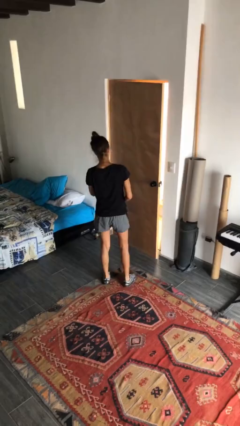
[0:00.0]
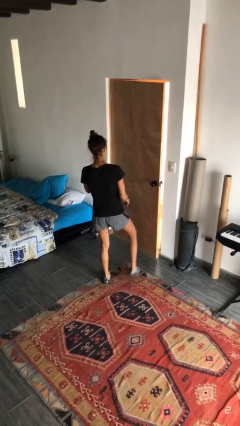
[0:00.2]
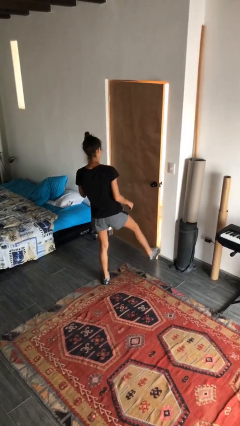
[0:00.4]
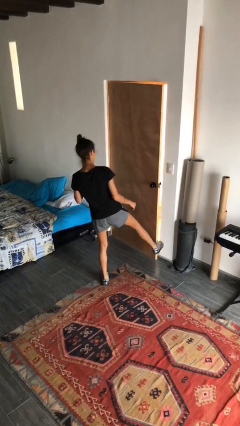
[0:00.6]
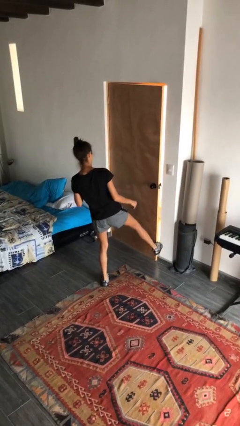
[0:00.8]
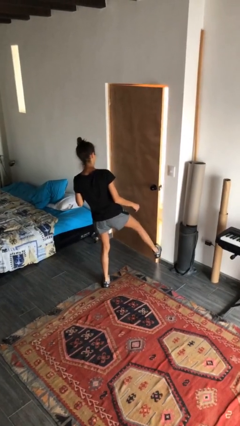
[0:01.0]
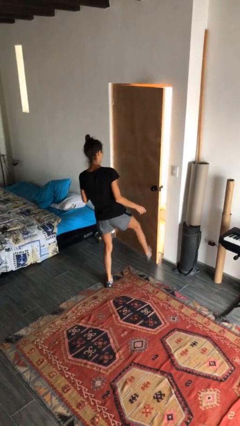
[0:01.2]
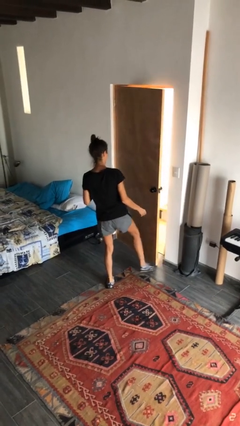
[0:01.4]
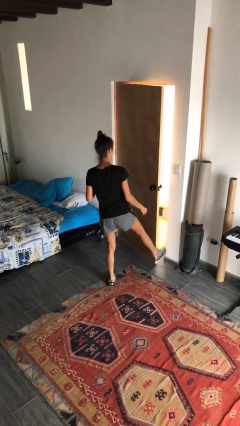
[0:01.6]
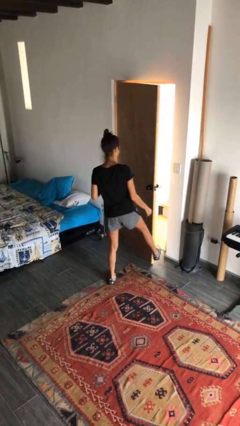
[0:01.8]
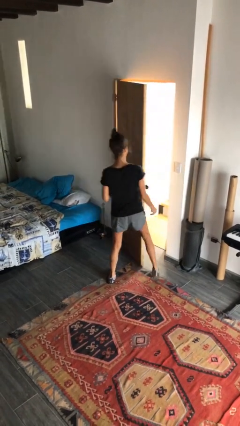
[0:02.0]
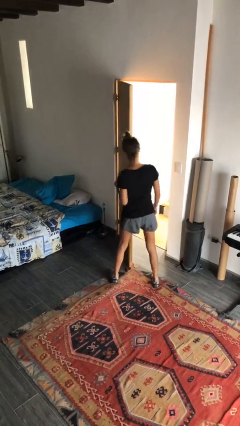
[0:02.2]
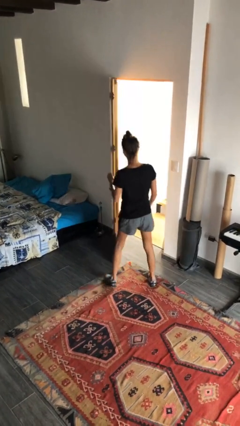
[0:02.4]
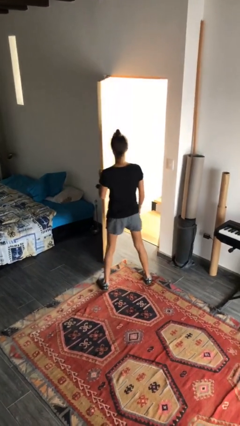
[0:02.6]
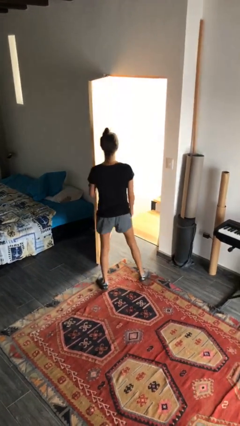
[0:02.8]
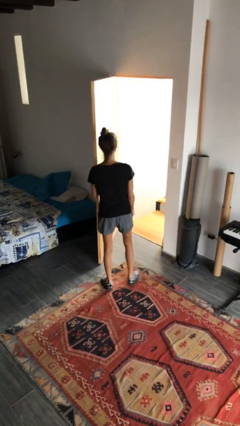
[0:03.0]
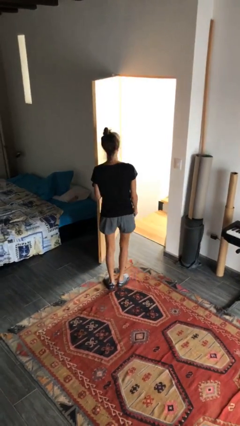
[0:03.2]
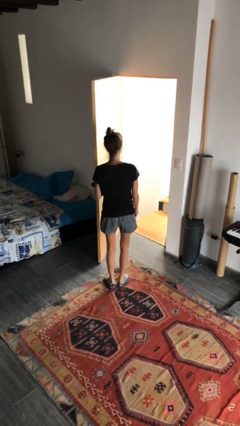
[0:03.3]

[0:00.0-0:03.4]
person opens facility door

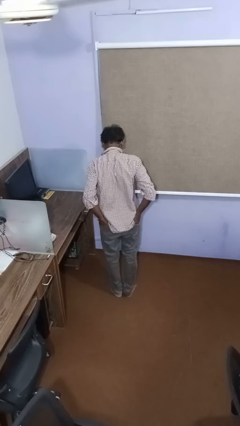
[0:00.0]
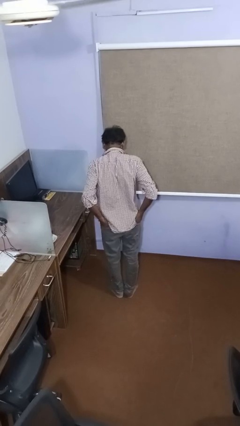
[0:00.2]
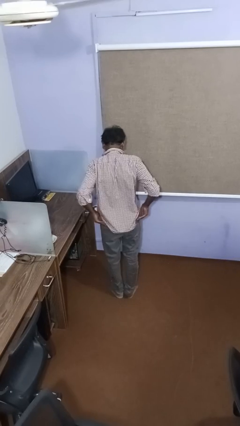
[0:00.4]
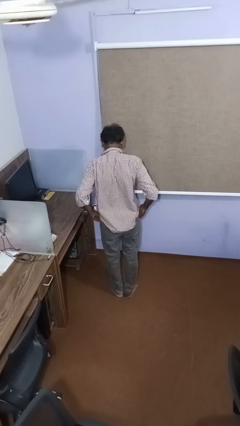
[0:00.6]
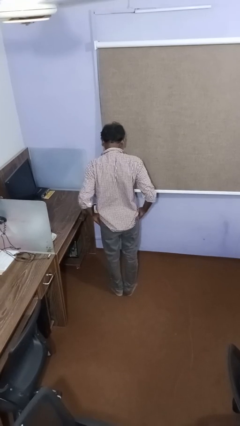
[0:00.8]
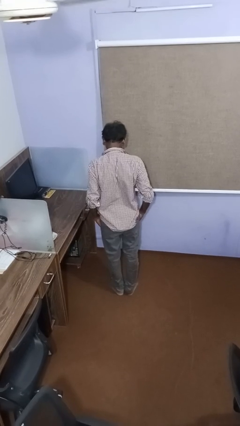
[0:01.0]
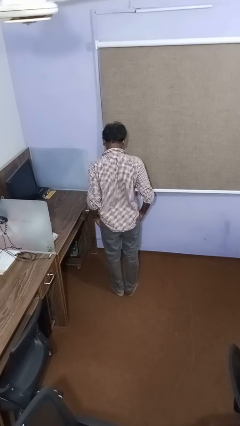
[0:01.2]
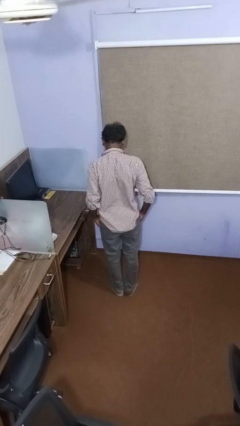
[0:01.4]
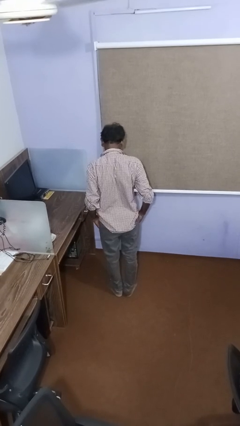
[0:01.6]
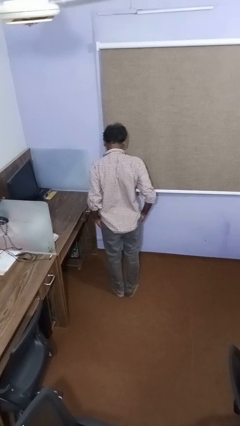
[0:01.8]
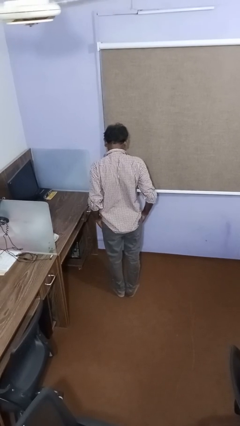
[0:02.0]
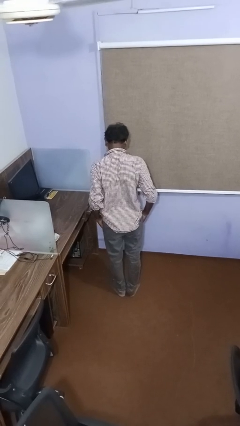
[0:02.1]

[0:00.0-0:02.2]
person puts hands in back pockets

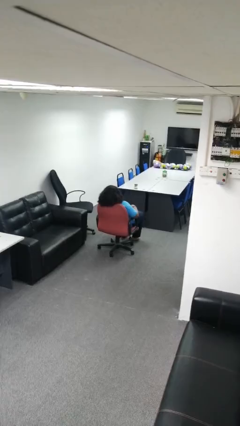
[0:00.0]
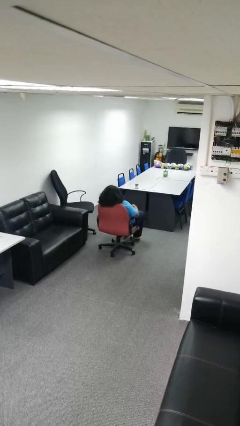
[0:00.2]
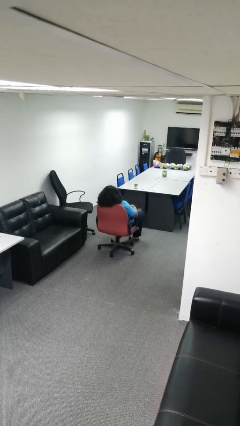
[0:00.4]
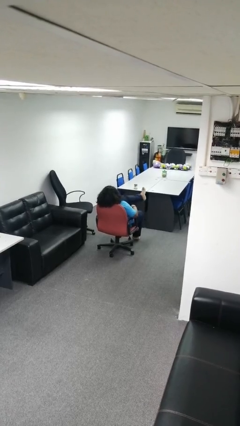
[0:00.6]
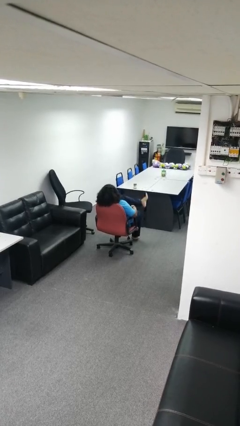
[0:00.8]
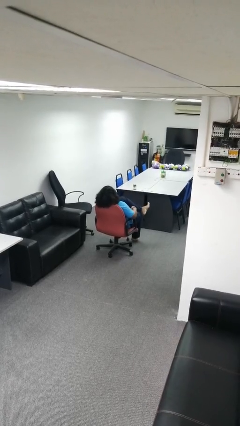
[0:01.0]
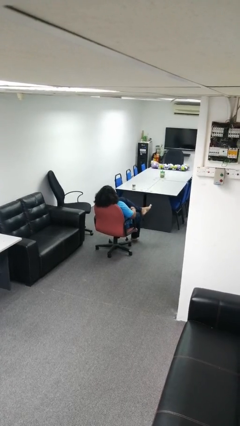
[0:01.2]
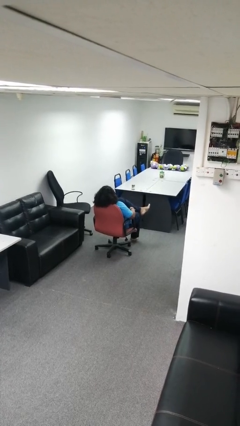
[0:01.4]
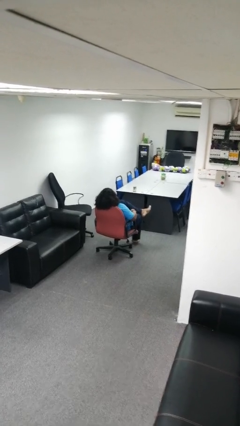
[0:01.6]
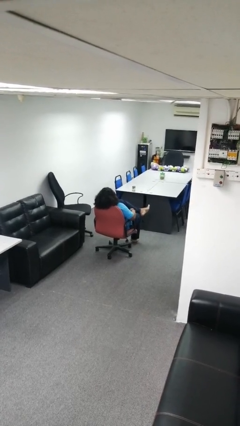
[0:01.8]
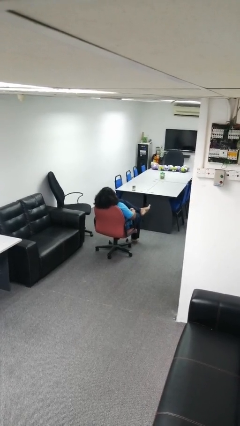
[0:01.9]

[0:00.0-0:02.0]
person crosses legs

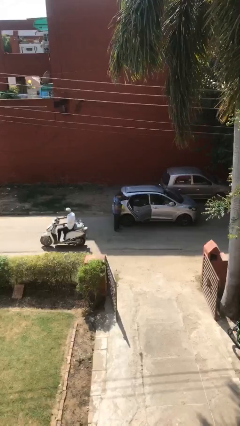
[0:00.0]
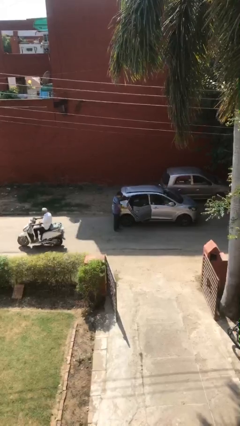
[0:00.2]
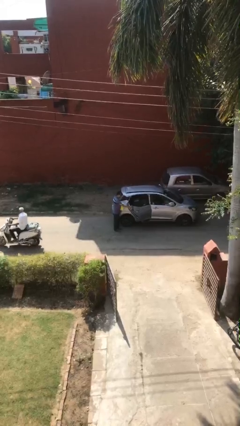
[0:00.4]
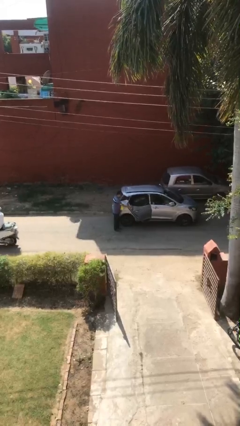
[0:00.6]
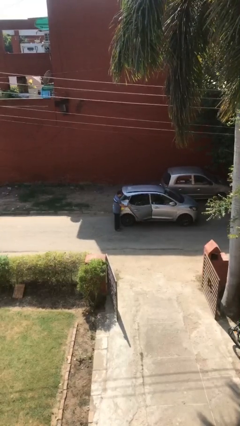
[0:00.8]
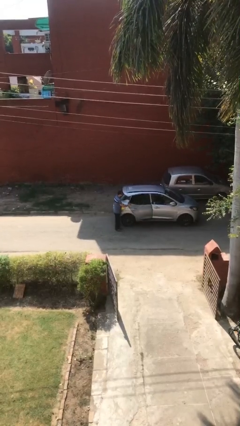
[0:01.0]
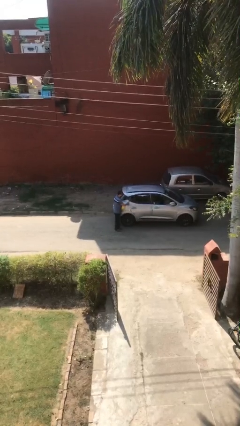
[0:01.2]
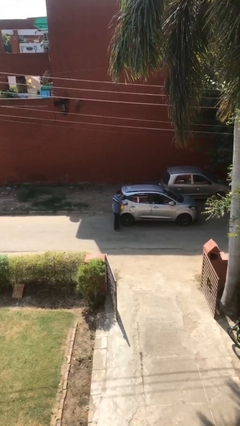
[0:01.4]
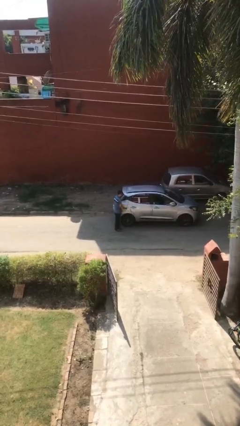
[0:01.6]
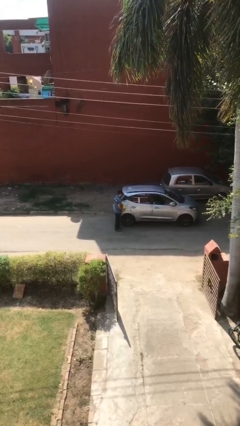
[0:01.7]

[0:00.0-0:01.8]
person closes car door

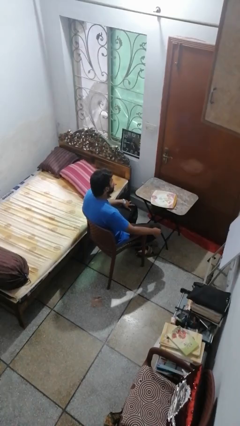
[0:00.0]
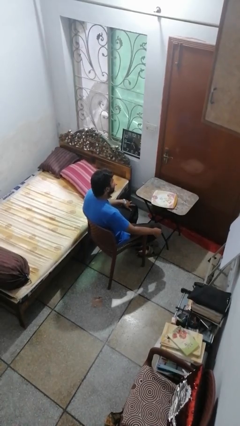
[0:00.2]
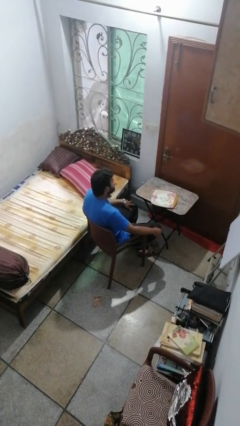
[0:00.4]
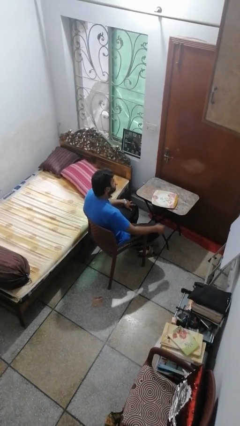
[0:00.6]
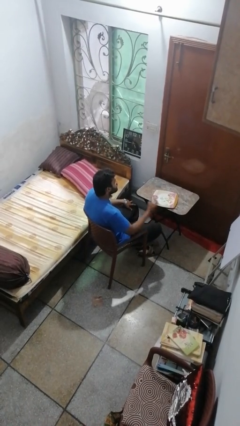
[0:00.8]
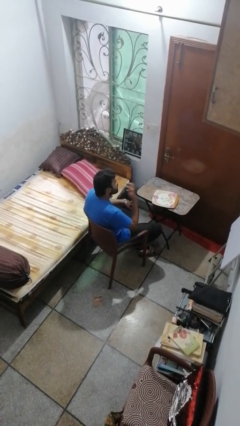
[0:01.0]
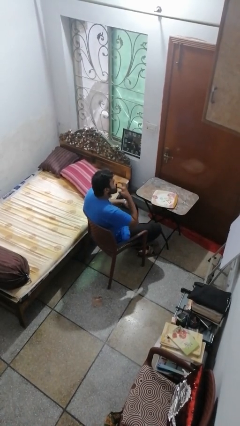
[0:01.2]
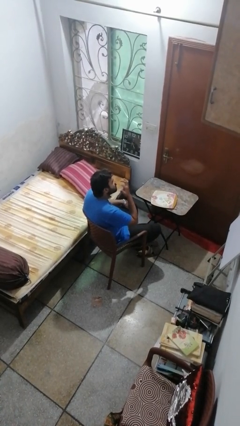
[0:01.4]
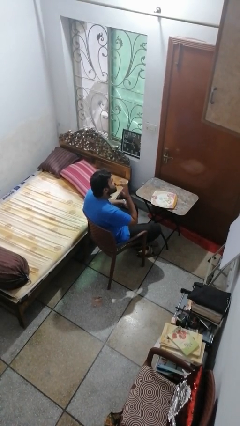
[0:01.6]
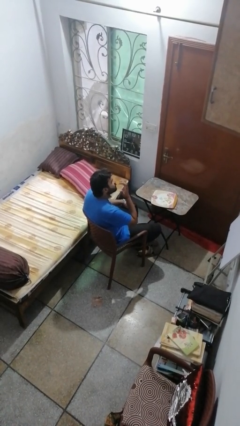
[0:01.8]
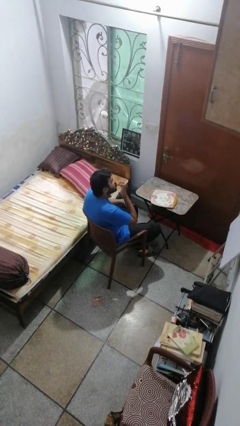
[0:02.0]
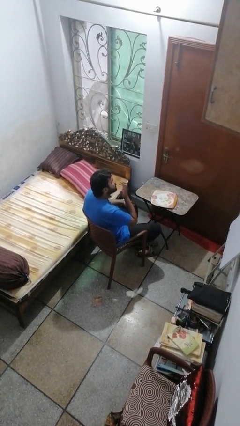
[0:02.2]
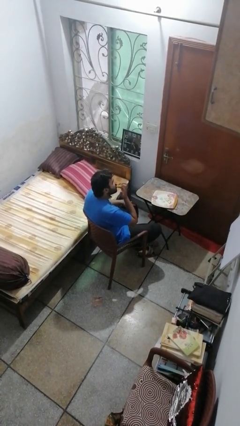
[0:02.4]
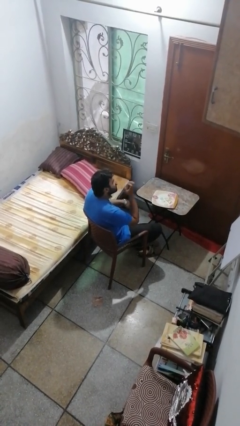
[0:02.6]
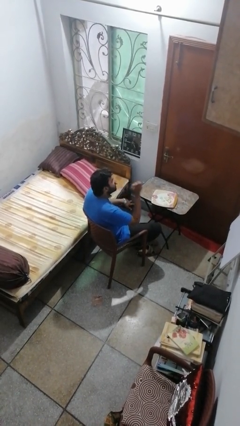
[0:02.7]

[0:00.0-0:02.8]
person licks fingers

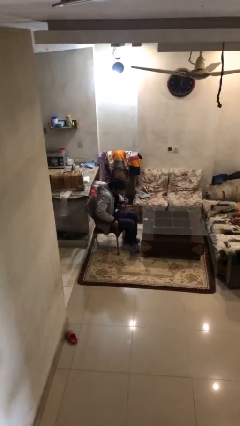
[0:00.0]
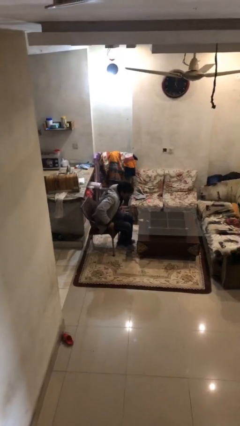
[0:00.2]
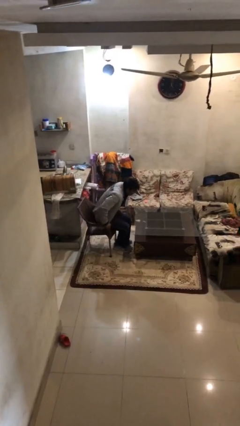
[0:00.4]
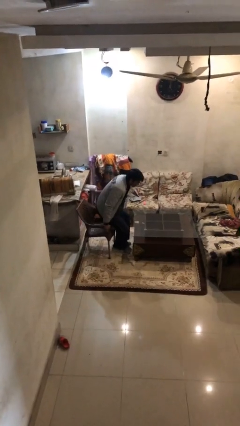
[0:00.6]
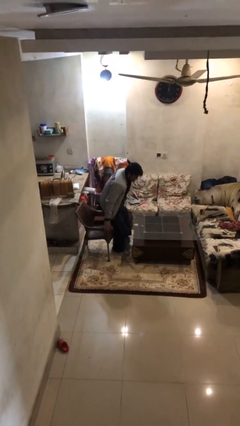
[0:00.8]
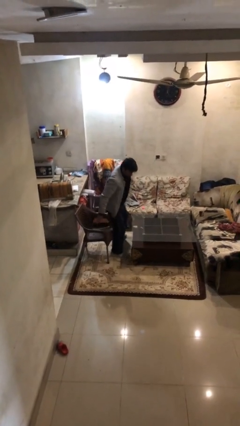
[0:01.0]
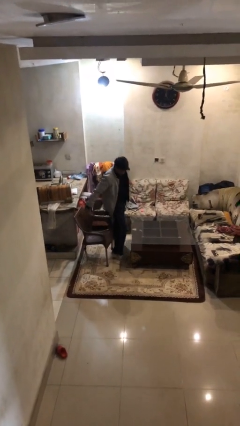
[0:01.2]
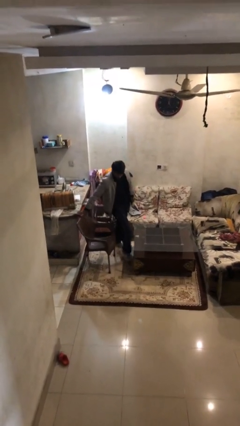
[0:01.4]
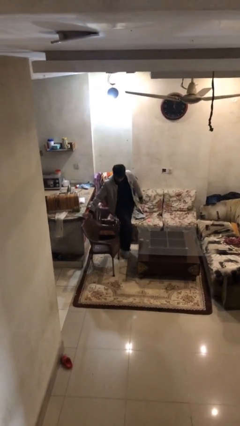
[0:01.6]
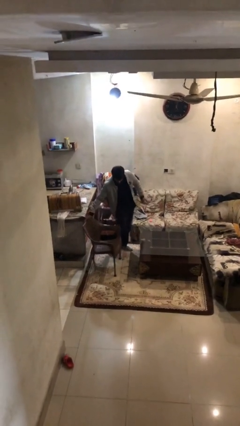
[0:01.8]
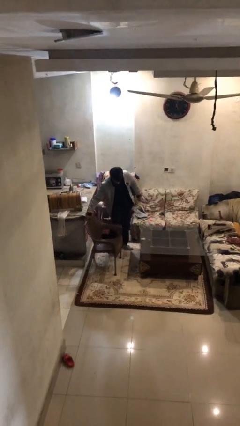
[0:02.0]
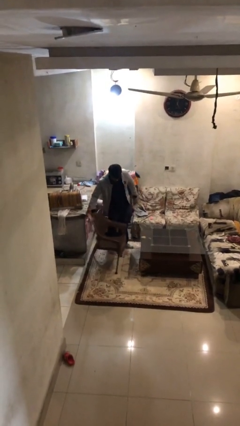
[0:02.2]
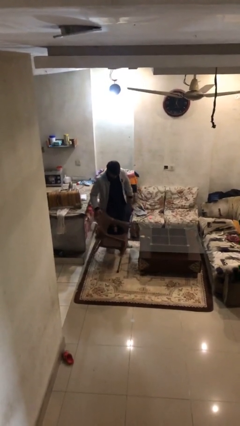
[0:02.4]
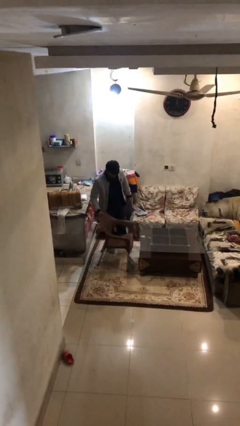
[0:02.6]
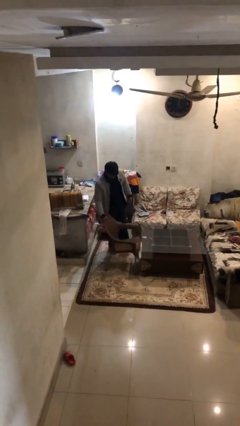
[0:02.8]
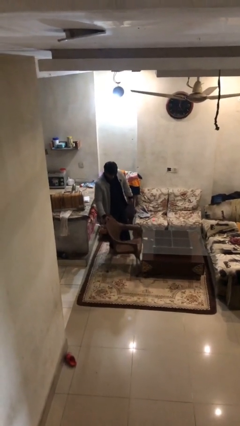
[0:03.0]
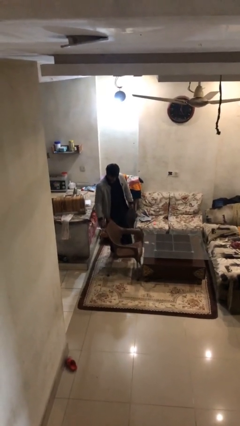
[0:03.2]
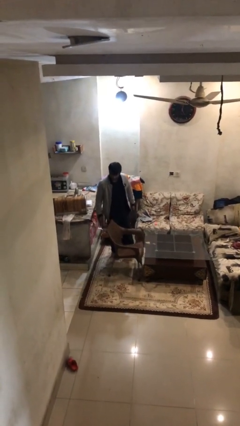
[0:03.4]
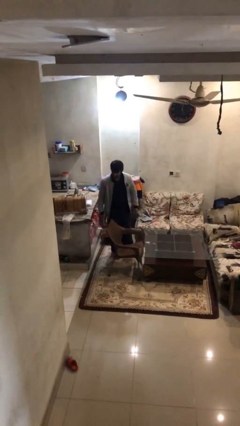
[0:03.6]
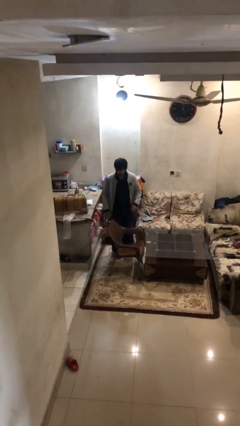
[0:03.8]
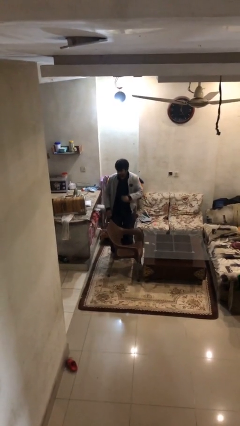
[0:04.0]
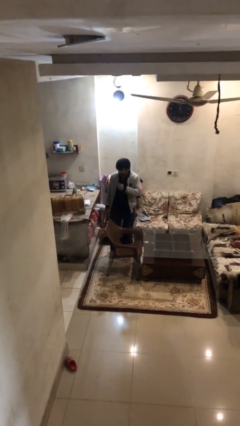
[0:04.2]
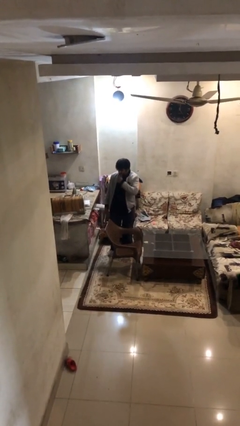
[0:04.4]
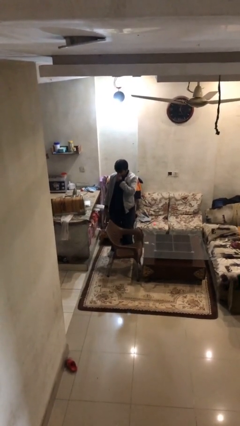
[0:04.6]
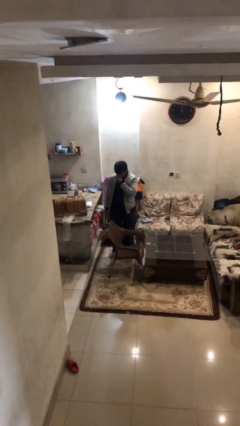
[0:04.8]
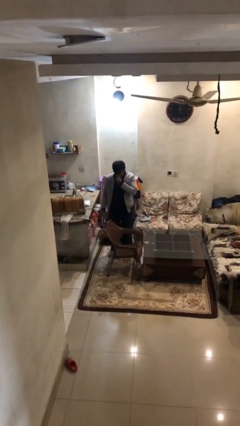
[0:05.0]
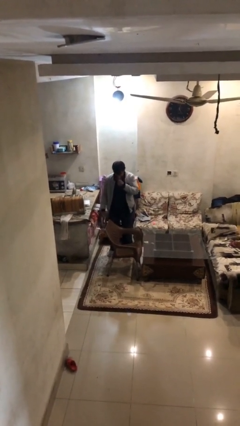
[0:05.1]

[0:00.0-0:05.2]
person stands up

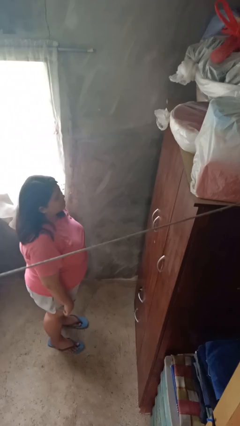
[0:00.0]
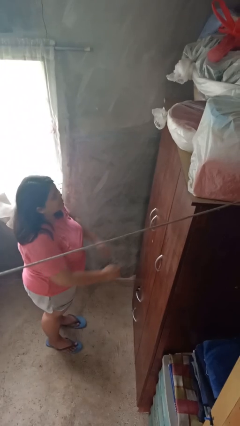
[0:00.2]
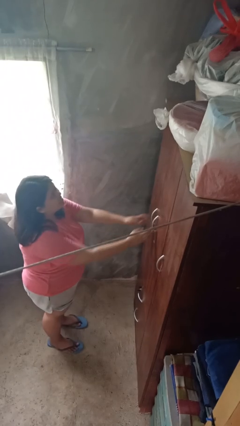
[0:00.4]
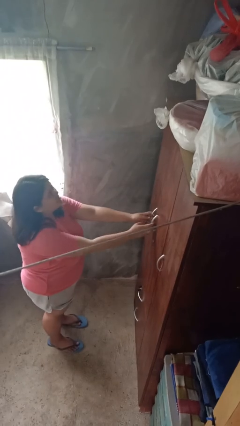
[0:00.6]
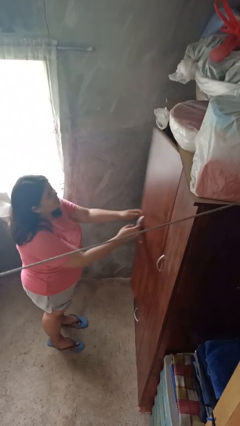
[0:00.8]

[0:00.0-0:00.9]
person opens closet door
